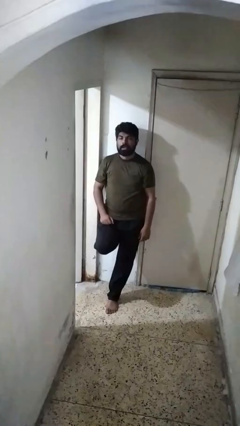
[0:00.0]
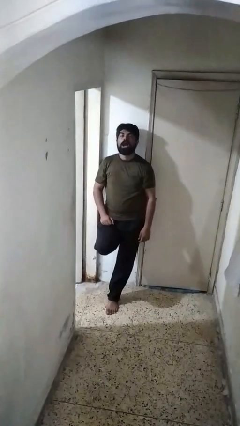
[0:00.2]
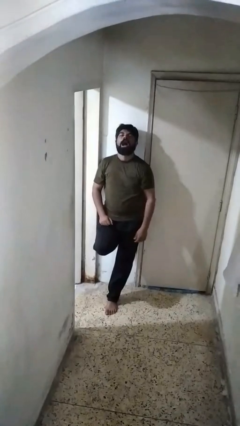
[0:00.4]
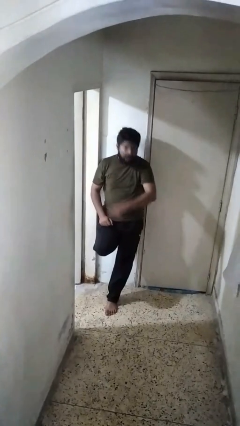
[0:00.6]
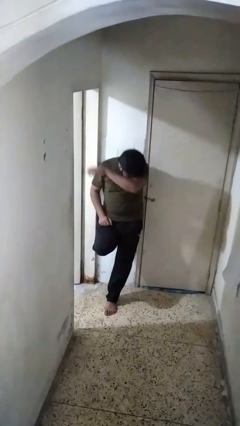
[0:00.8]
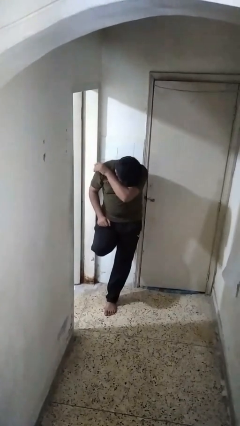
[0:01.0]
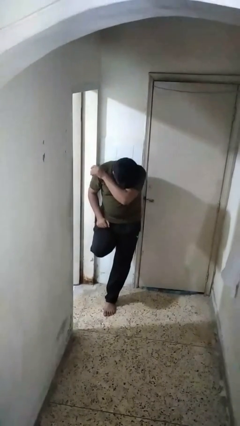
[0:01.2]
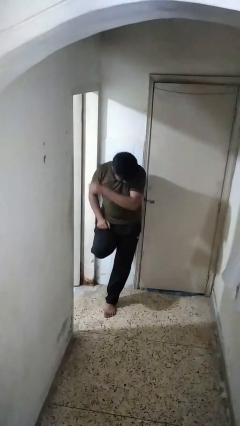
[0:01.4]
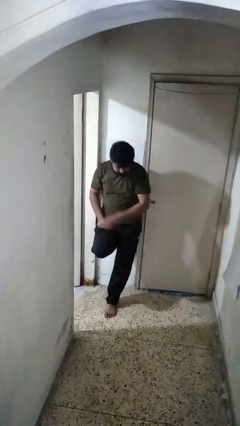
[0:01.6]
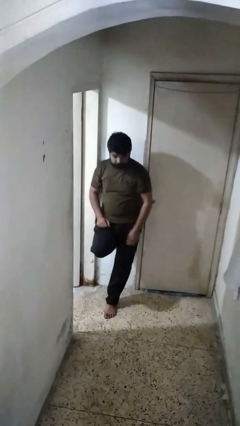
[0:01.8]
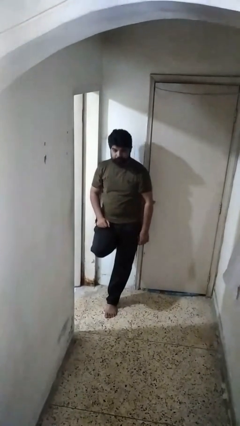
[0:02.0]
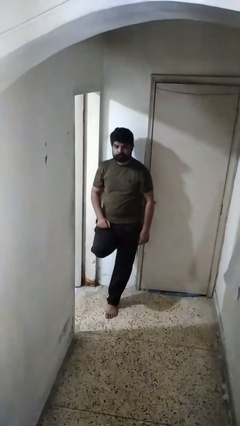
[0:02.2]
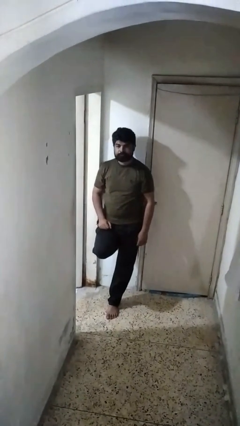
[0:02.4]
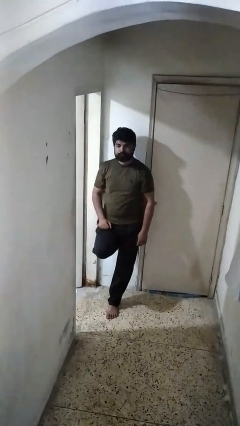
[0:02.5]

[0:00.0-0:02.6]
person sneezes into arm

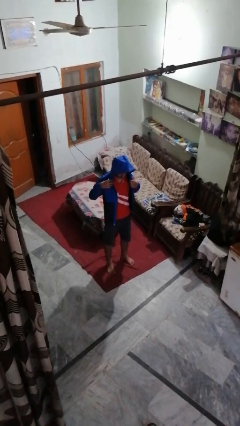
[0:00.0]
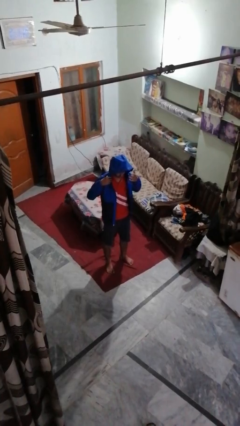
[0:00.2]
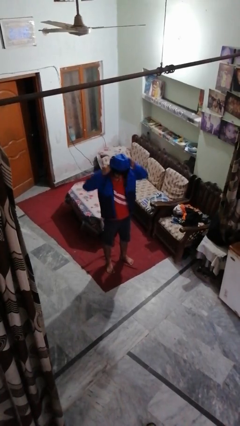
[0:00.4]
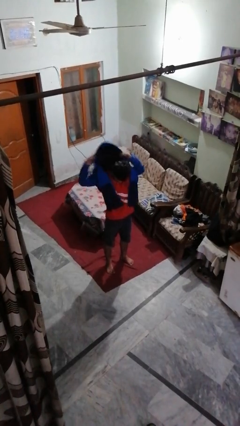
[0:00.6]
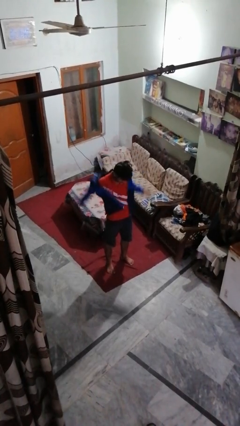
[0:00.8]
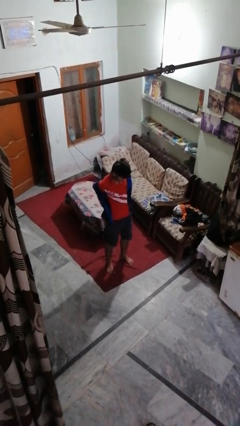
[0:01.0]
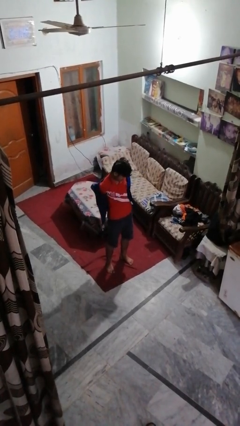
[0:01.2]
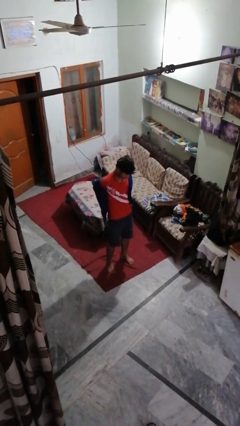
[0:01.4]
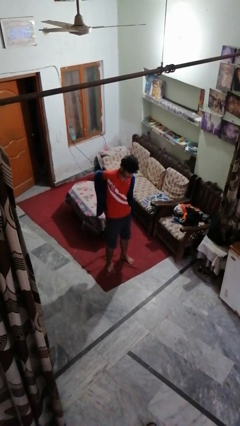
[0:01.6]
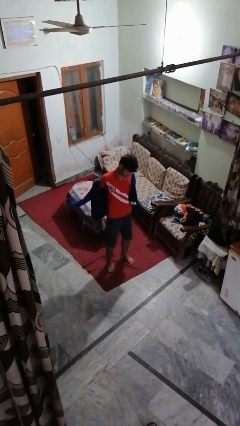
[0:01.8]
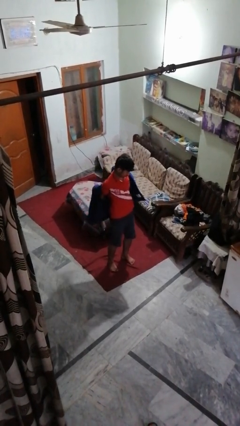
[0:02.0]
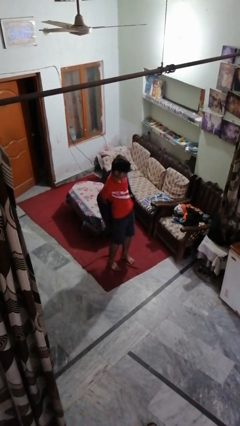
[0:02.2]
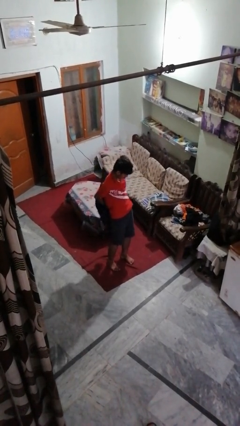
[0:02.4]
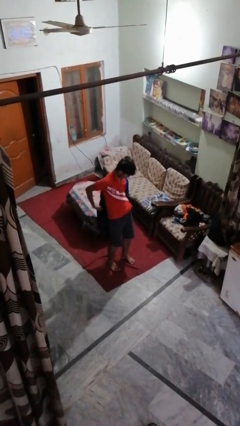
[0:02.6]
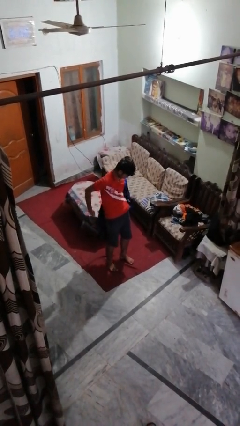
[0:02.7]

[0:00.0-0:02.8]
person takes off hoodie

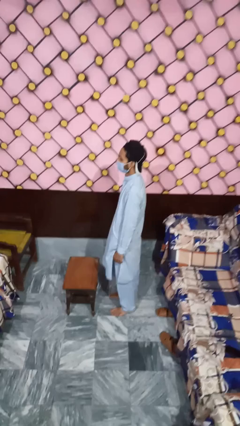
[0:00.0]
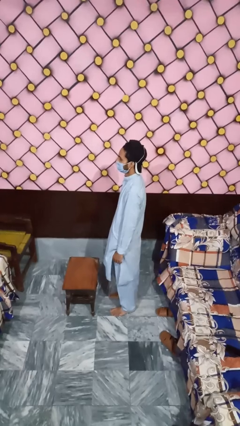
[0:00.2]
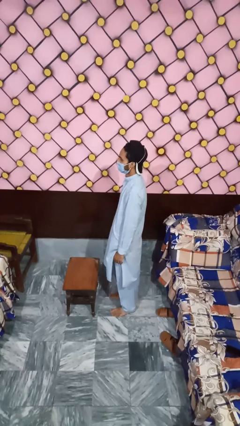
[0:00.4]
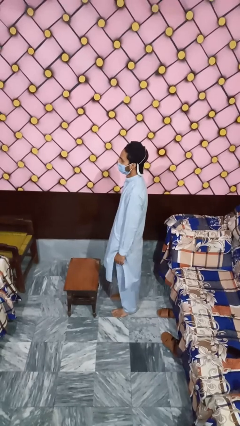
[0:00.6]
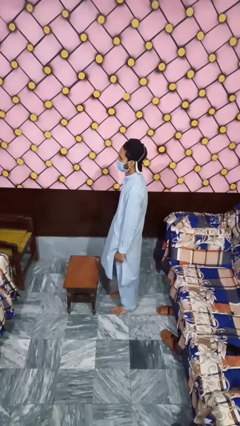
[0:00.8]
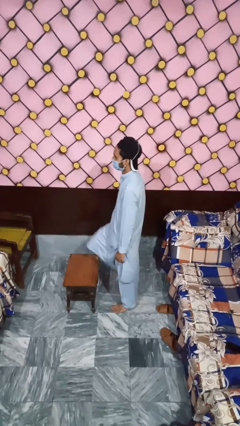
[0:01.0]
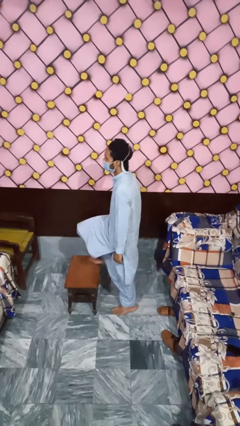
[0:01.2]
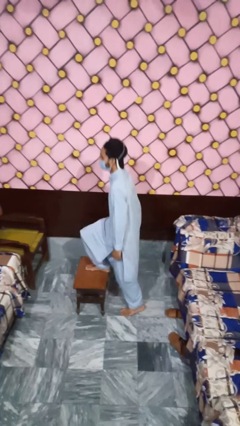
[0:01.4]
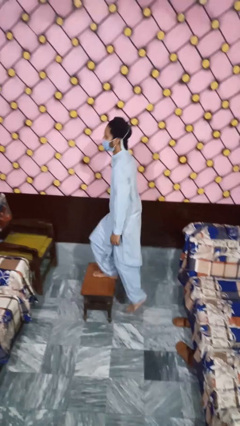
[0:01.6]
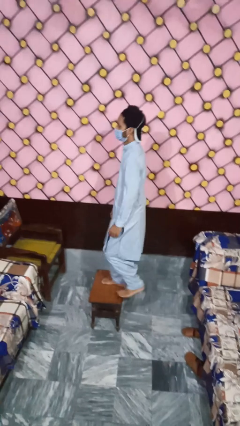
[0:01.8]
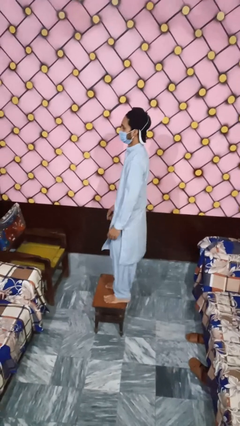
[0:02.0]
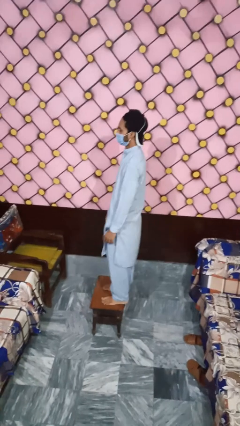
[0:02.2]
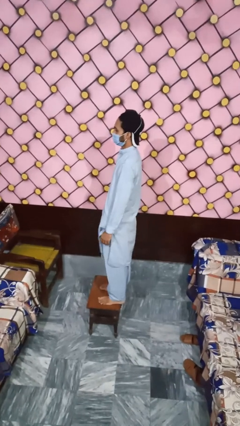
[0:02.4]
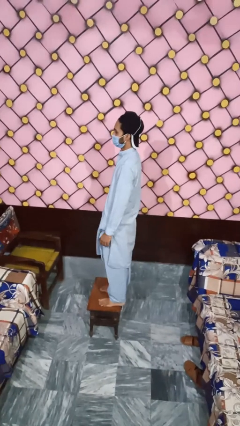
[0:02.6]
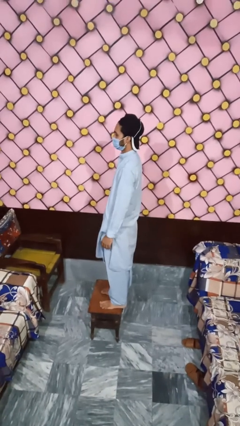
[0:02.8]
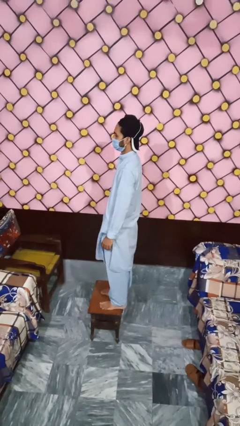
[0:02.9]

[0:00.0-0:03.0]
person climbs on table

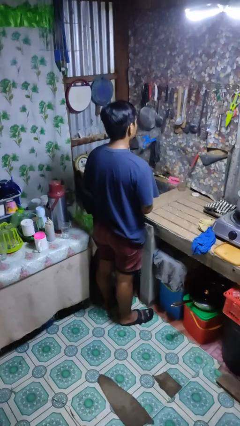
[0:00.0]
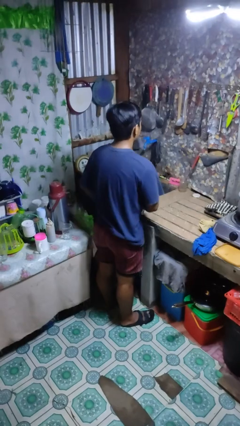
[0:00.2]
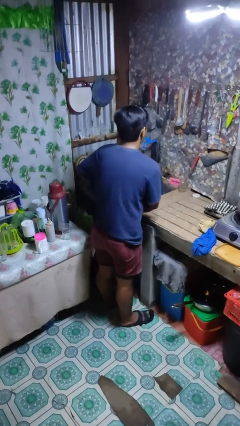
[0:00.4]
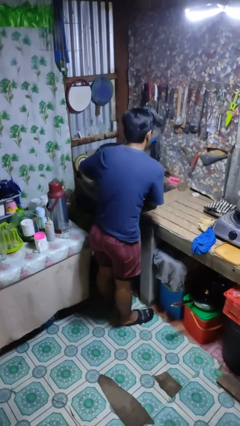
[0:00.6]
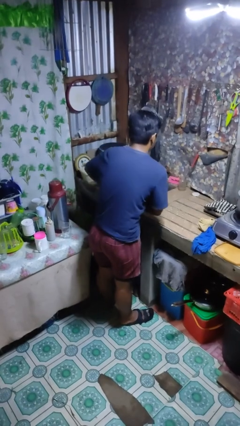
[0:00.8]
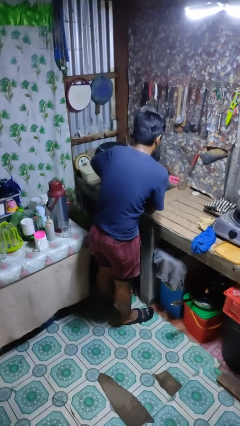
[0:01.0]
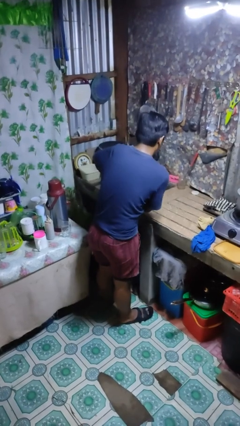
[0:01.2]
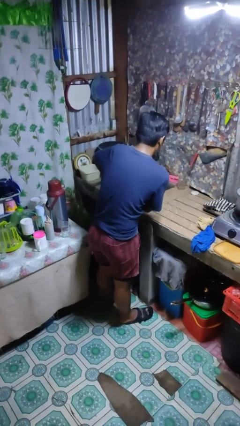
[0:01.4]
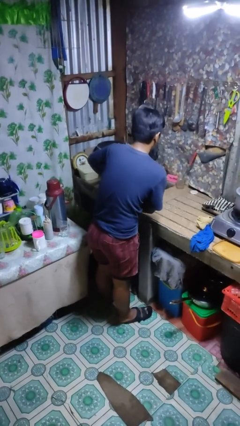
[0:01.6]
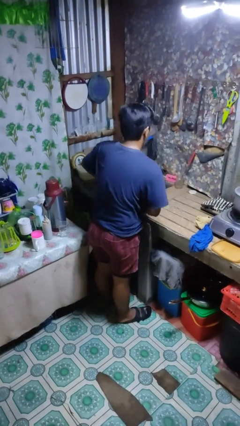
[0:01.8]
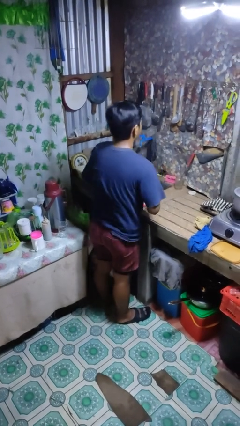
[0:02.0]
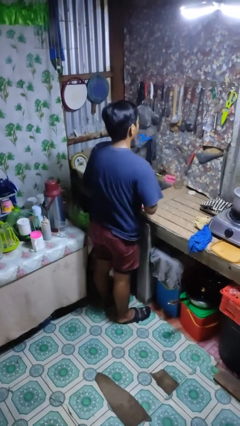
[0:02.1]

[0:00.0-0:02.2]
person applies deodorant

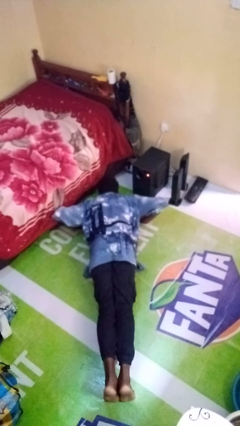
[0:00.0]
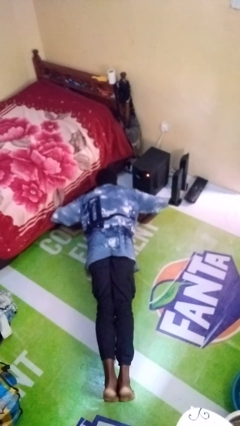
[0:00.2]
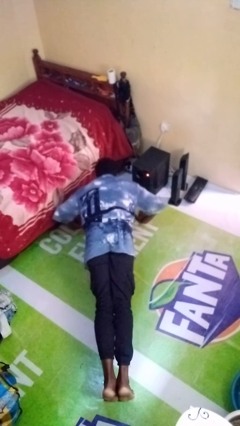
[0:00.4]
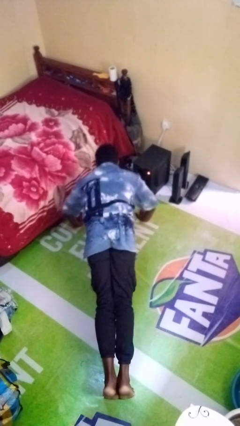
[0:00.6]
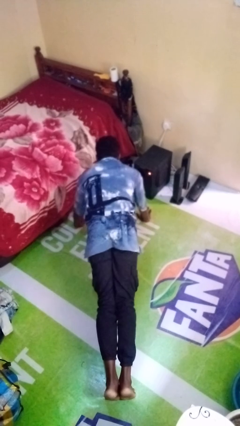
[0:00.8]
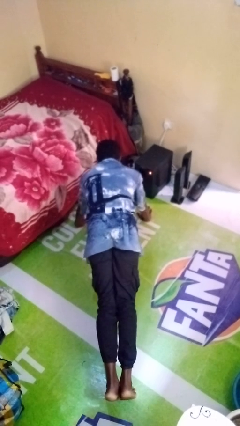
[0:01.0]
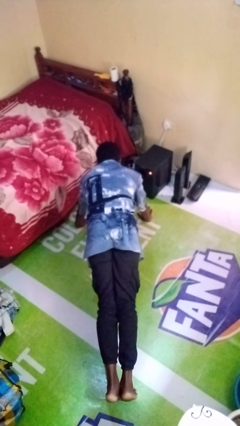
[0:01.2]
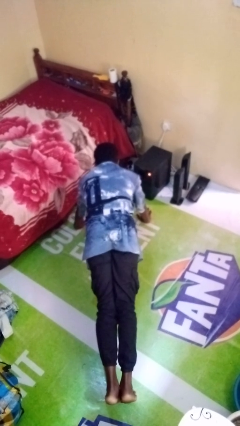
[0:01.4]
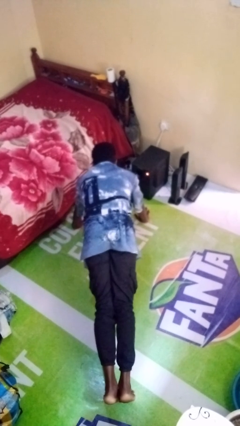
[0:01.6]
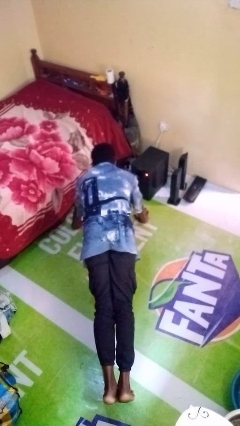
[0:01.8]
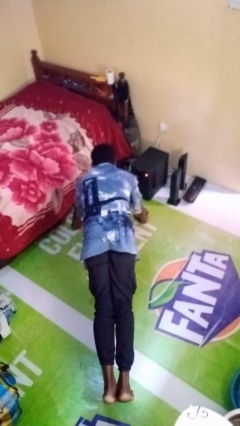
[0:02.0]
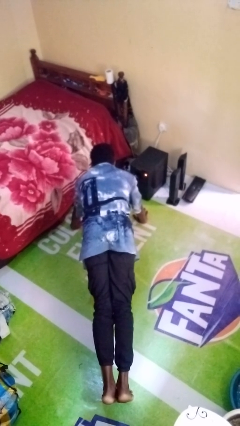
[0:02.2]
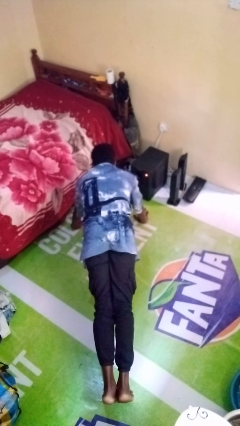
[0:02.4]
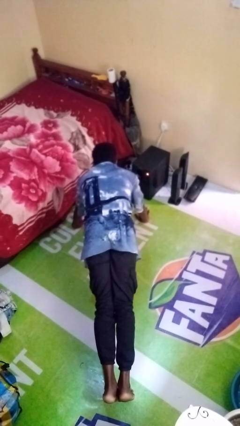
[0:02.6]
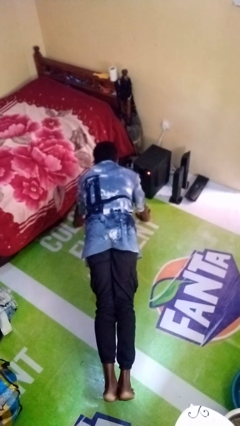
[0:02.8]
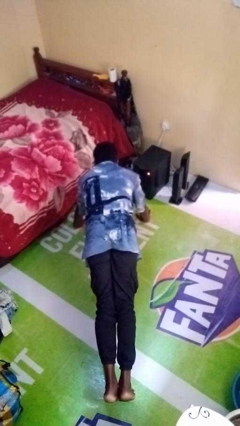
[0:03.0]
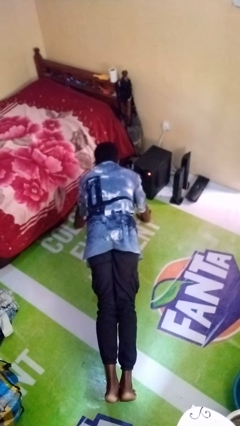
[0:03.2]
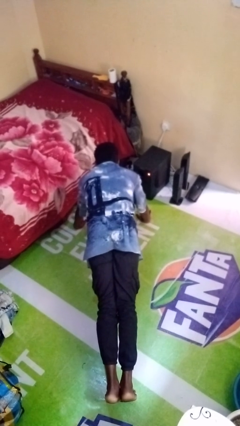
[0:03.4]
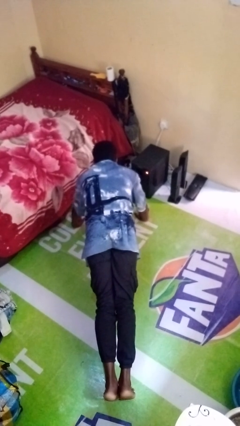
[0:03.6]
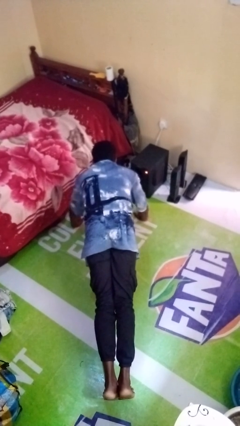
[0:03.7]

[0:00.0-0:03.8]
person exercises with pushup

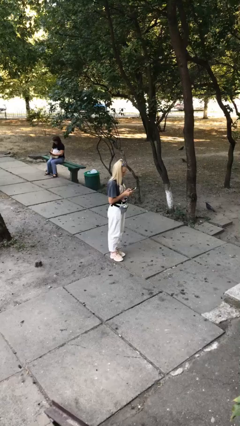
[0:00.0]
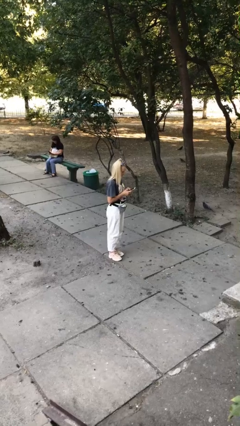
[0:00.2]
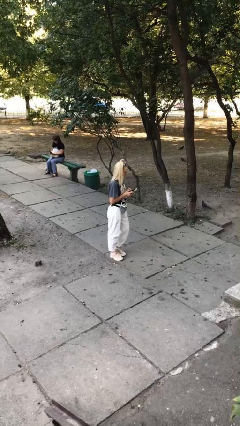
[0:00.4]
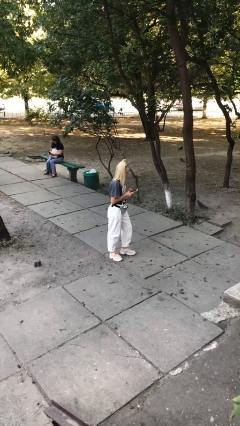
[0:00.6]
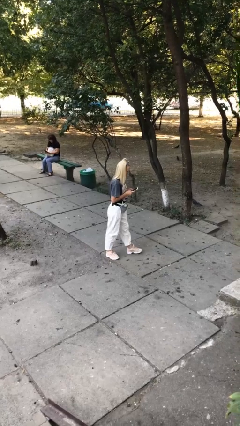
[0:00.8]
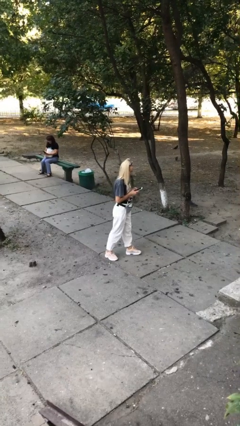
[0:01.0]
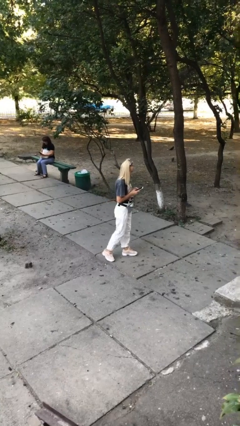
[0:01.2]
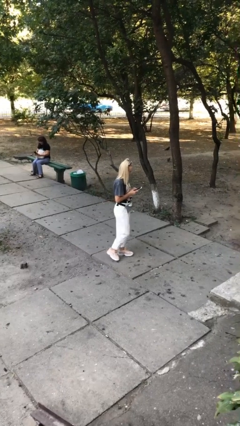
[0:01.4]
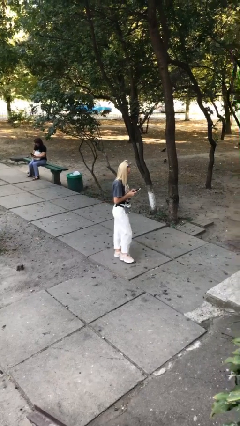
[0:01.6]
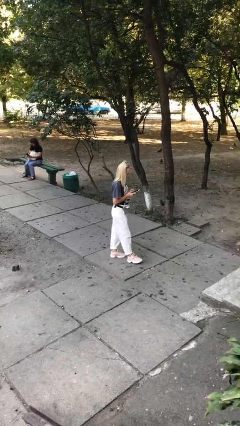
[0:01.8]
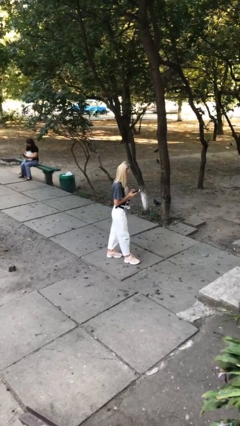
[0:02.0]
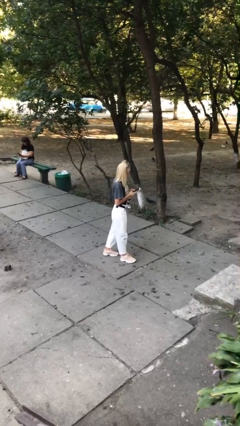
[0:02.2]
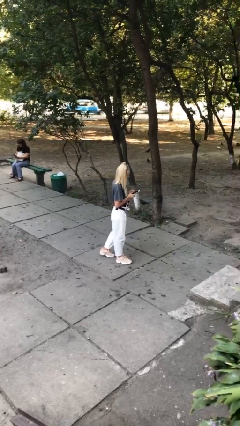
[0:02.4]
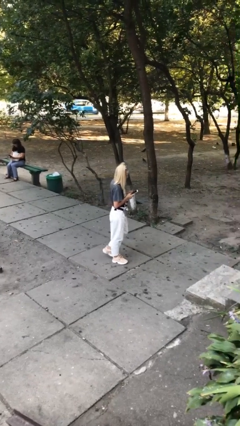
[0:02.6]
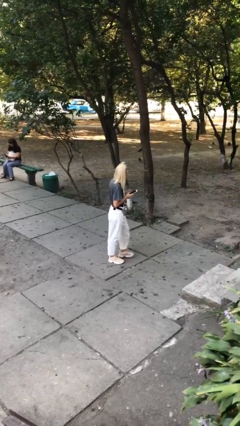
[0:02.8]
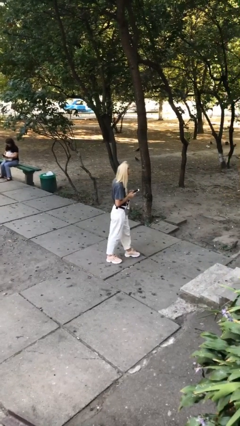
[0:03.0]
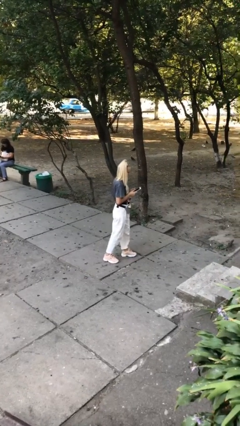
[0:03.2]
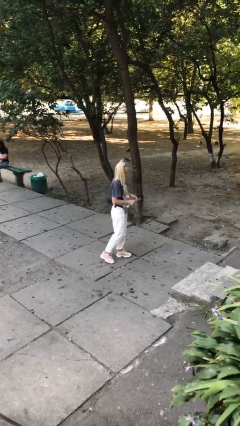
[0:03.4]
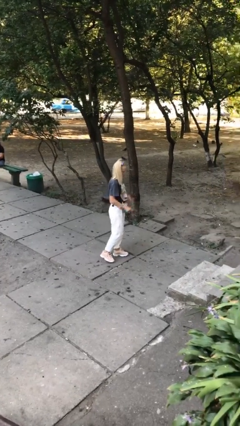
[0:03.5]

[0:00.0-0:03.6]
person texts on phone
